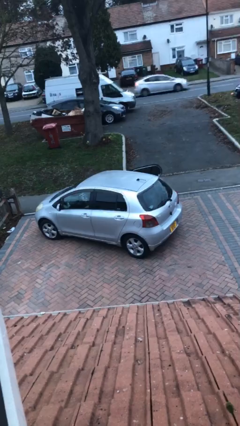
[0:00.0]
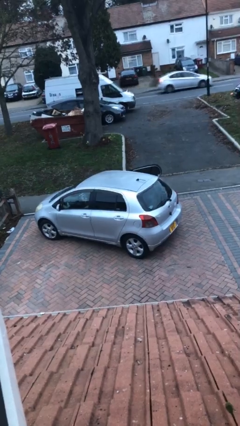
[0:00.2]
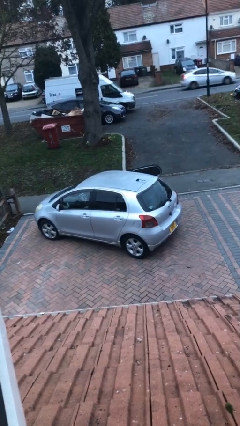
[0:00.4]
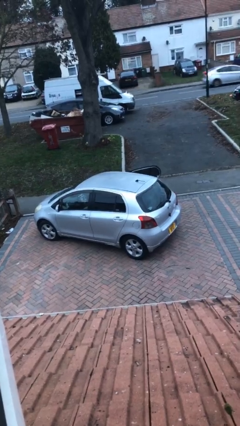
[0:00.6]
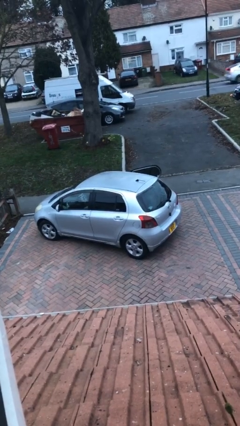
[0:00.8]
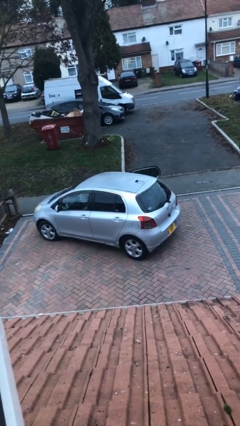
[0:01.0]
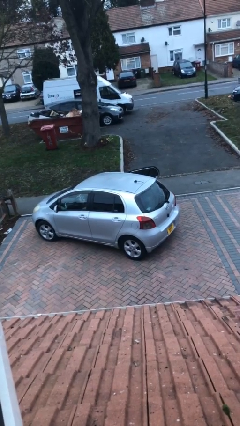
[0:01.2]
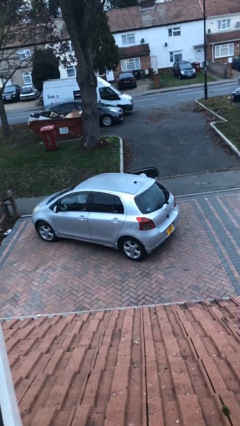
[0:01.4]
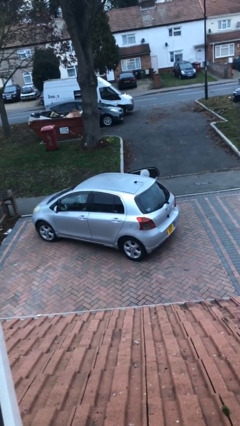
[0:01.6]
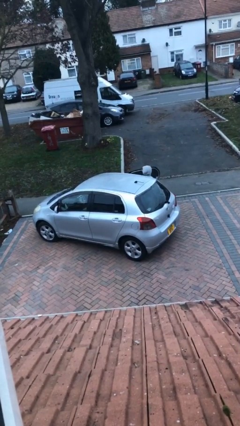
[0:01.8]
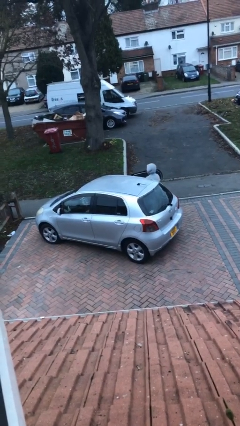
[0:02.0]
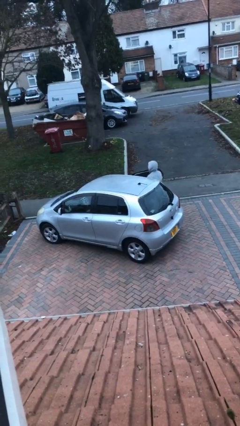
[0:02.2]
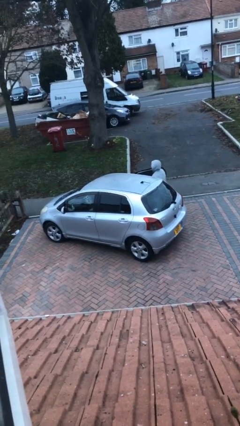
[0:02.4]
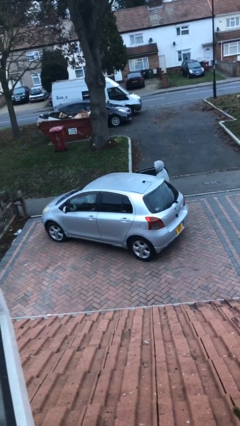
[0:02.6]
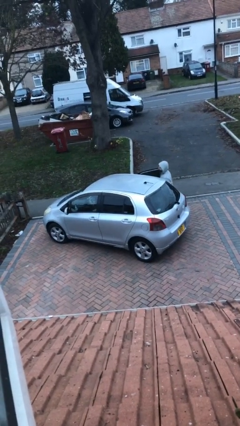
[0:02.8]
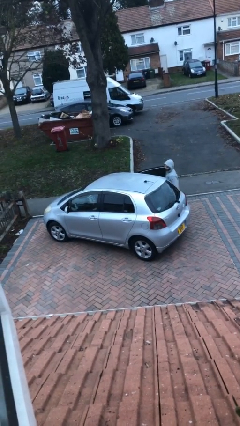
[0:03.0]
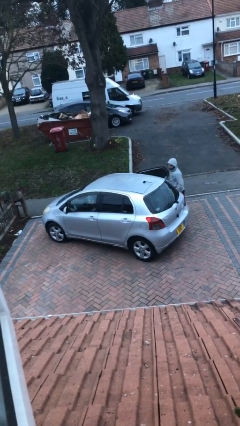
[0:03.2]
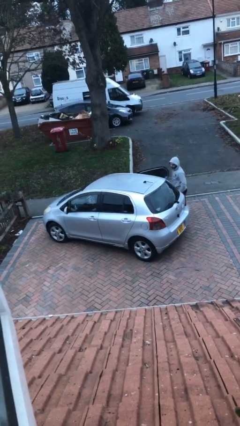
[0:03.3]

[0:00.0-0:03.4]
car drops off person

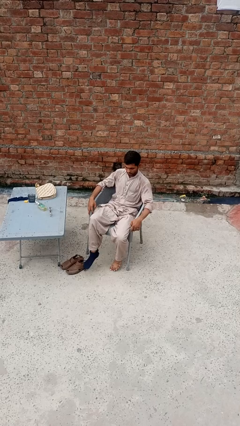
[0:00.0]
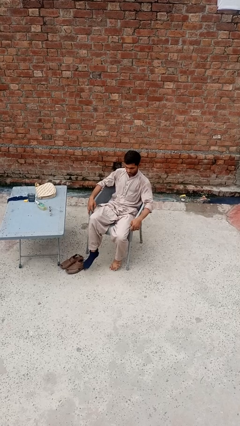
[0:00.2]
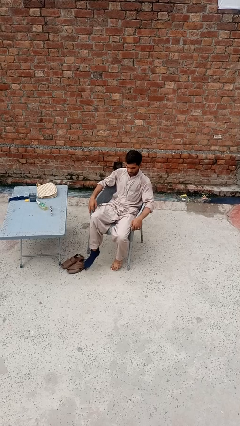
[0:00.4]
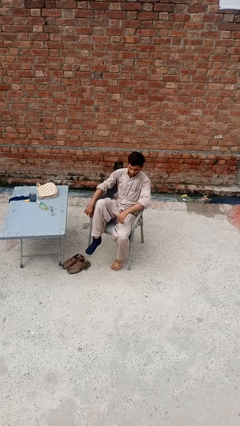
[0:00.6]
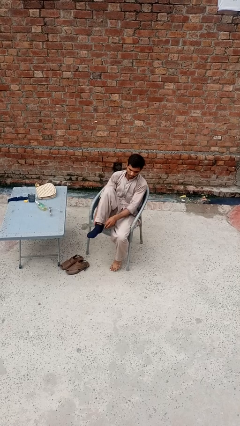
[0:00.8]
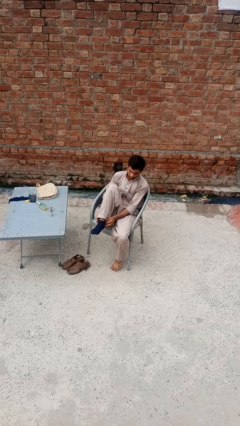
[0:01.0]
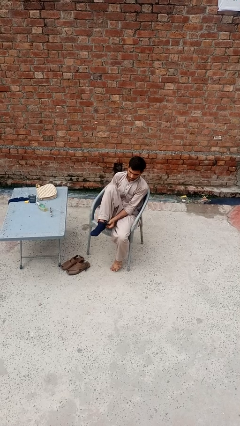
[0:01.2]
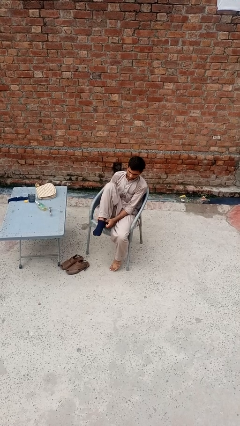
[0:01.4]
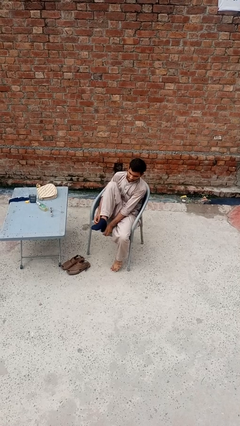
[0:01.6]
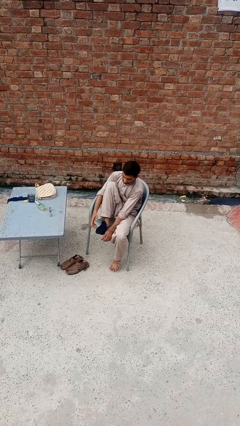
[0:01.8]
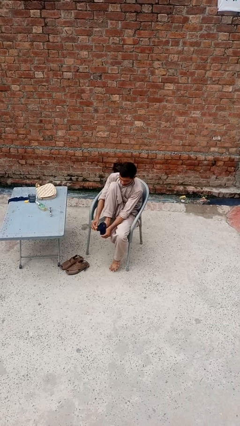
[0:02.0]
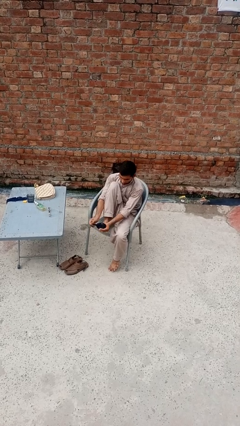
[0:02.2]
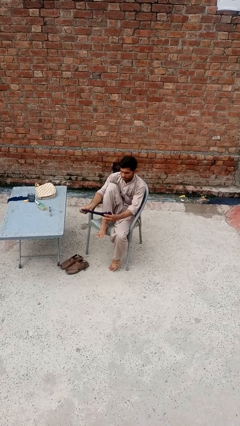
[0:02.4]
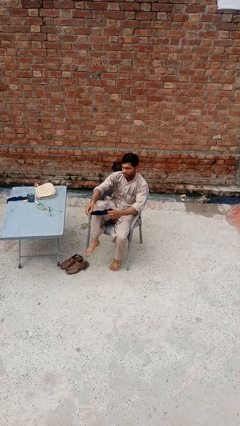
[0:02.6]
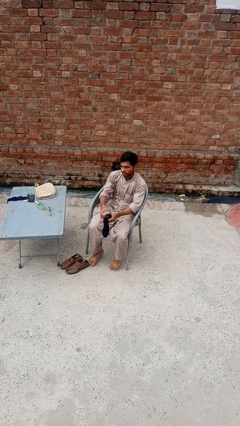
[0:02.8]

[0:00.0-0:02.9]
person takes off socks

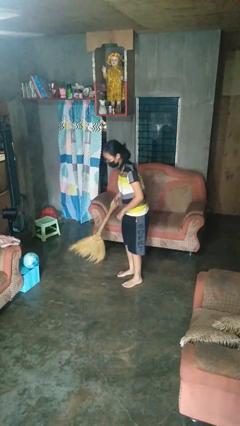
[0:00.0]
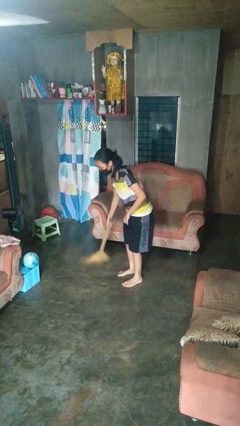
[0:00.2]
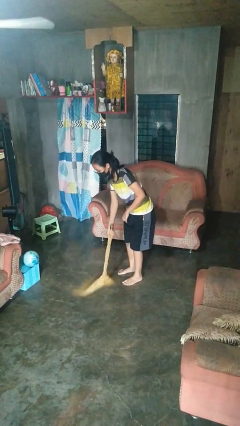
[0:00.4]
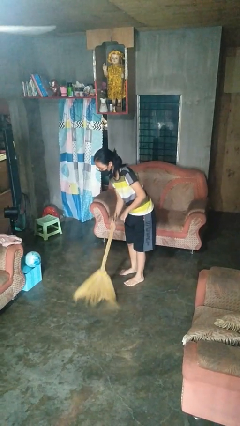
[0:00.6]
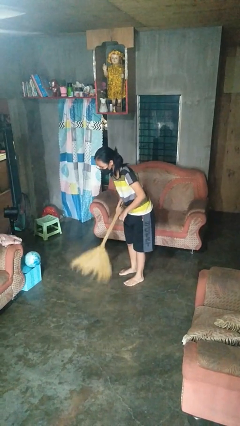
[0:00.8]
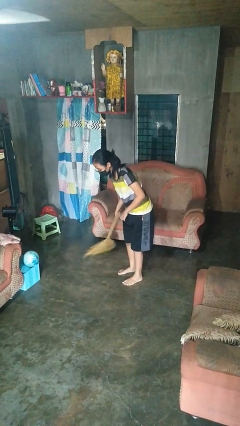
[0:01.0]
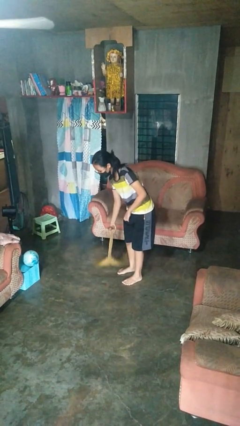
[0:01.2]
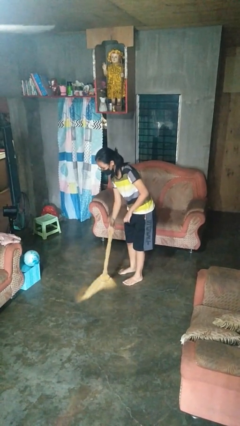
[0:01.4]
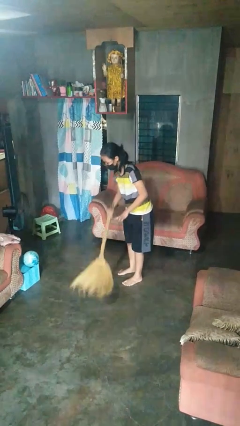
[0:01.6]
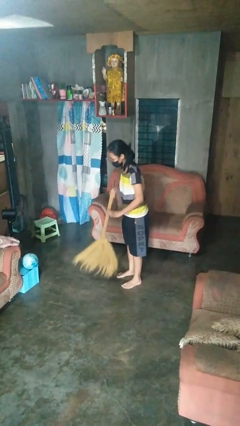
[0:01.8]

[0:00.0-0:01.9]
person sweeps floor

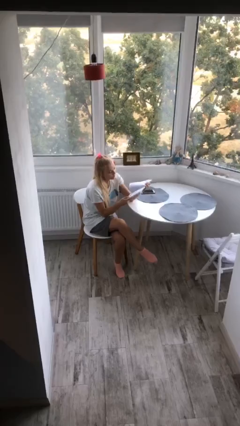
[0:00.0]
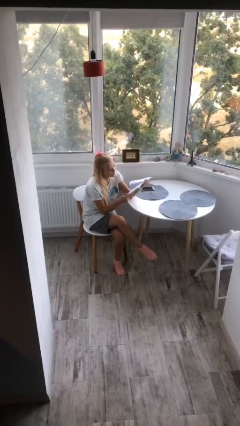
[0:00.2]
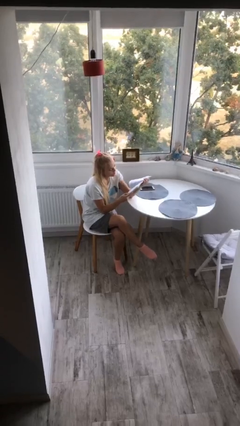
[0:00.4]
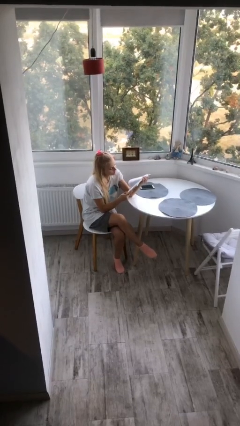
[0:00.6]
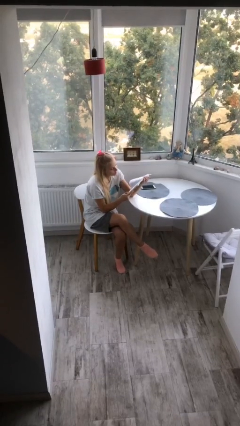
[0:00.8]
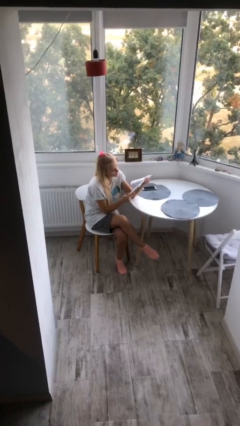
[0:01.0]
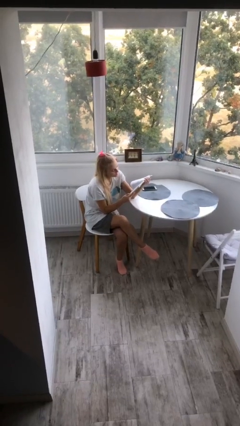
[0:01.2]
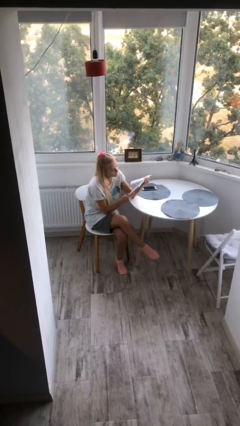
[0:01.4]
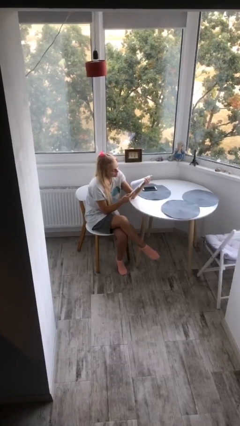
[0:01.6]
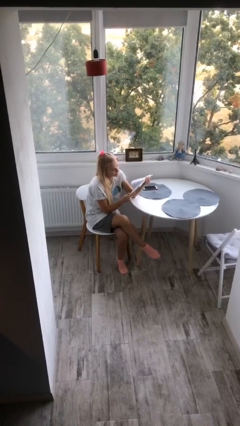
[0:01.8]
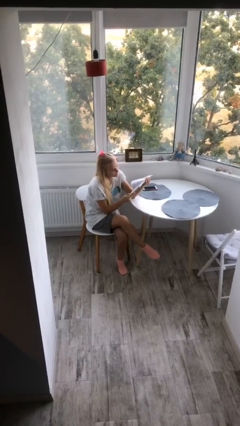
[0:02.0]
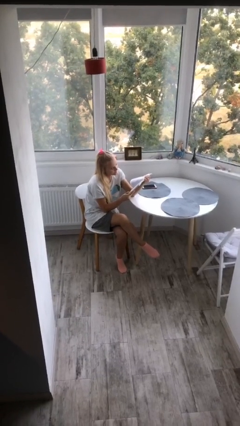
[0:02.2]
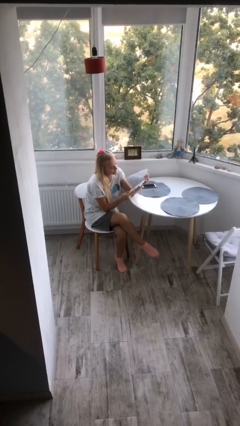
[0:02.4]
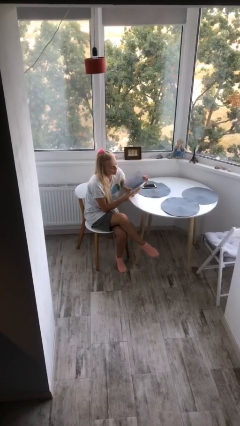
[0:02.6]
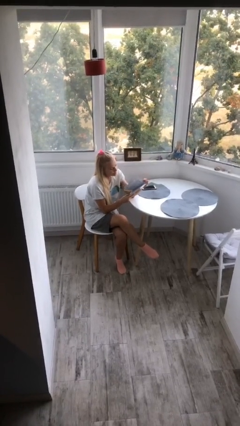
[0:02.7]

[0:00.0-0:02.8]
person reads document

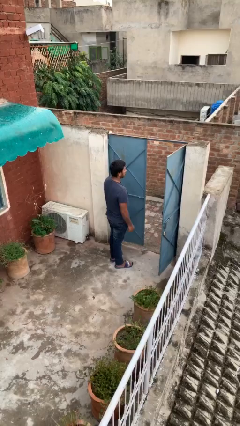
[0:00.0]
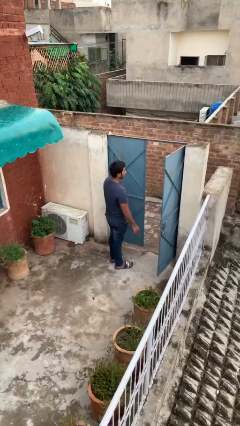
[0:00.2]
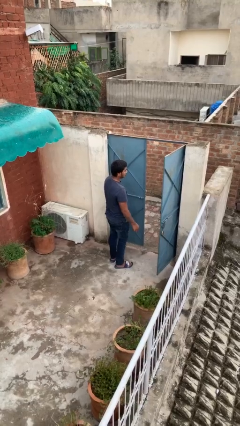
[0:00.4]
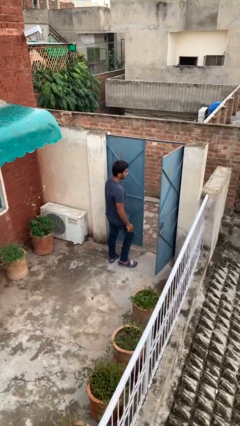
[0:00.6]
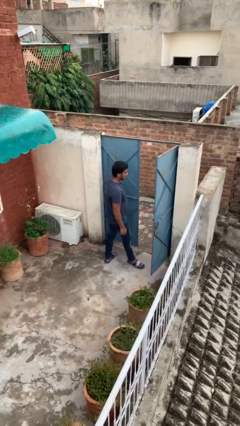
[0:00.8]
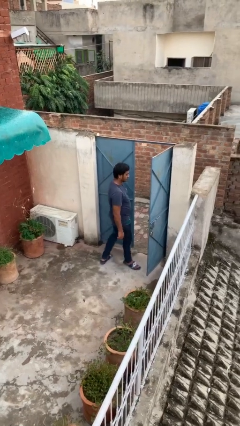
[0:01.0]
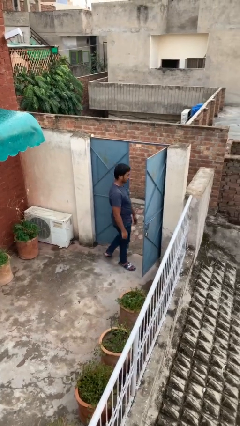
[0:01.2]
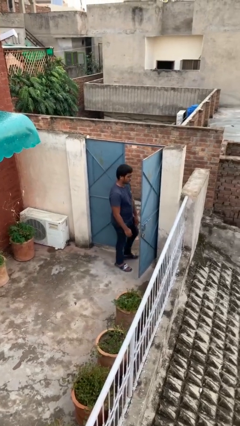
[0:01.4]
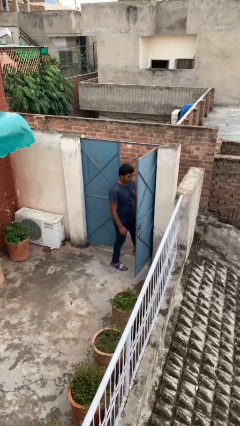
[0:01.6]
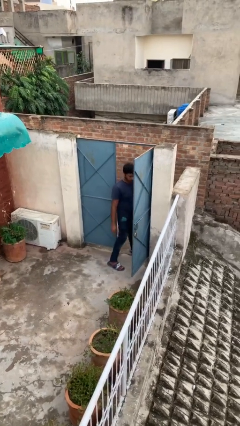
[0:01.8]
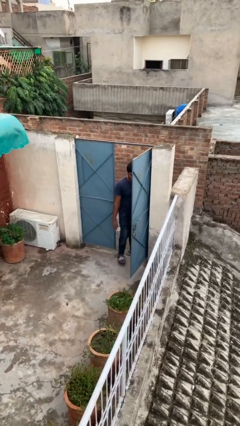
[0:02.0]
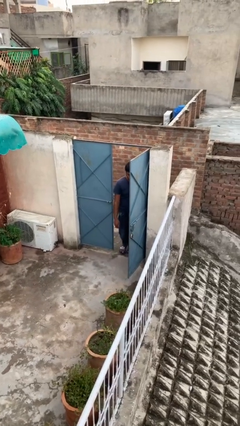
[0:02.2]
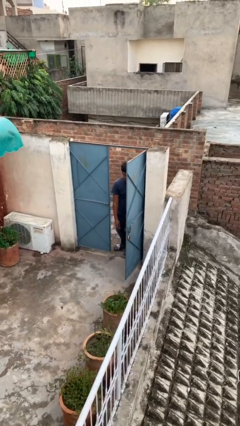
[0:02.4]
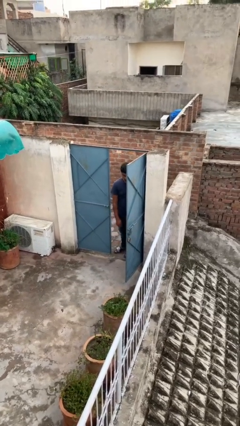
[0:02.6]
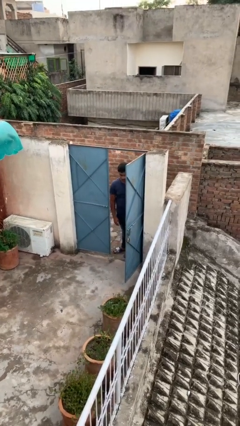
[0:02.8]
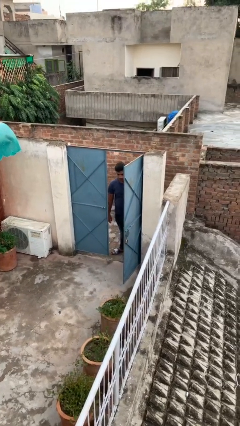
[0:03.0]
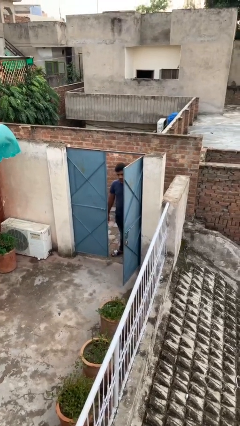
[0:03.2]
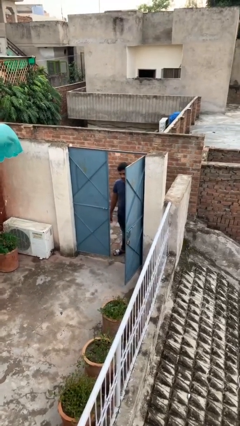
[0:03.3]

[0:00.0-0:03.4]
person exits scene through structure

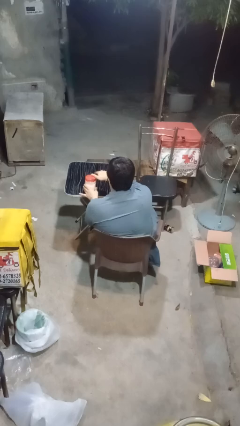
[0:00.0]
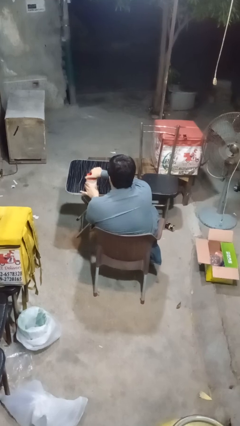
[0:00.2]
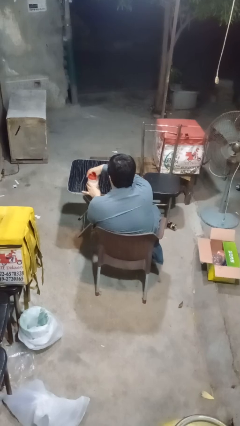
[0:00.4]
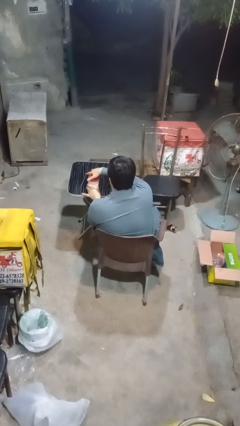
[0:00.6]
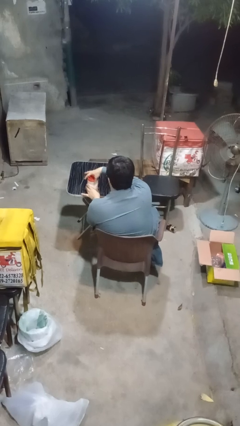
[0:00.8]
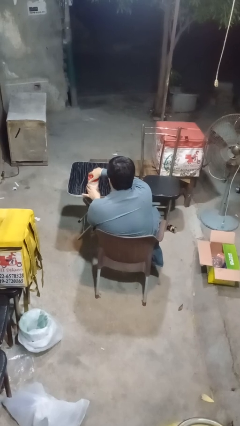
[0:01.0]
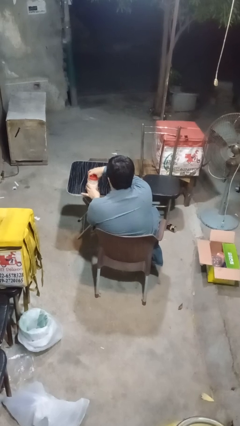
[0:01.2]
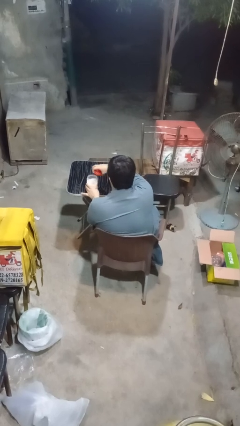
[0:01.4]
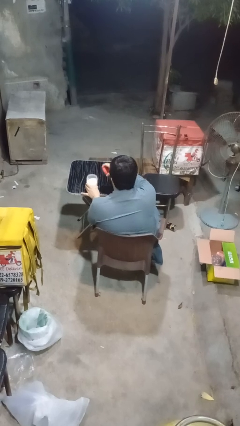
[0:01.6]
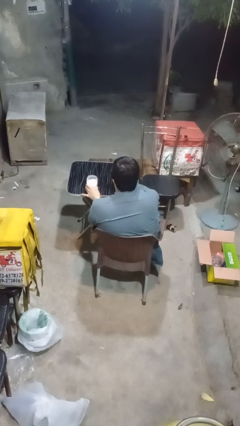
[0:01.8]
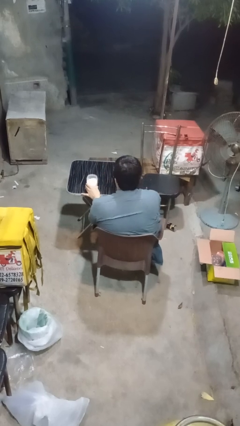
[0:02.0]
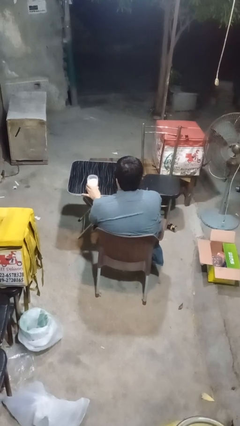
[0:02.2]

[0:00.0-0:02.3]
person opens jar

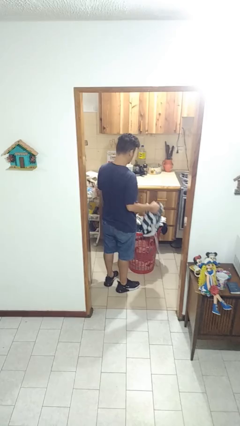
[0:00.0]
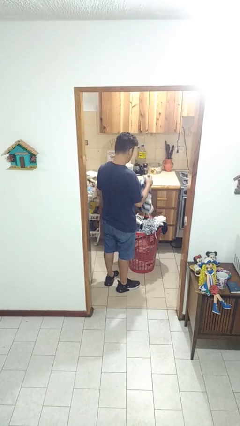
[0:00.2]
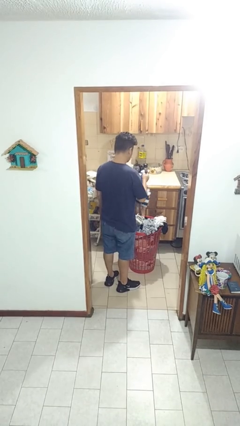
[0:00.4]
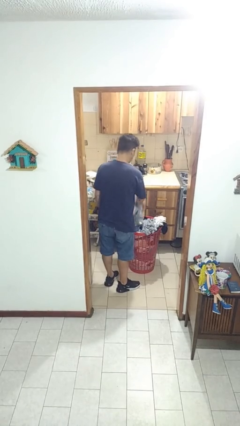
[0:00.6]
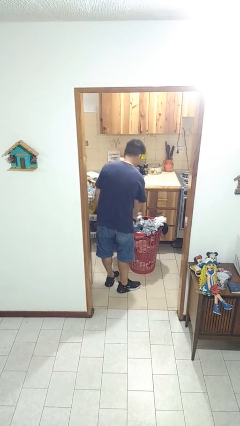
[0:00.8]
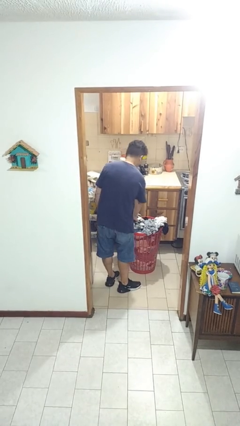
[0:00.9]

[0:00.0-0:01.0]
person puts object into basket
